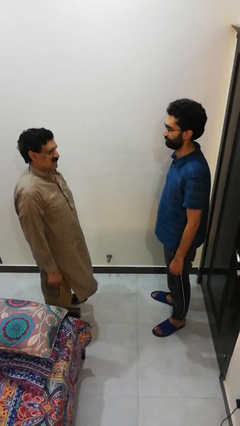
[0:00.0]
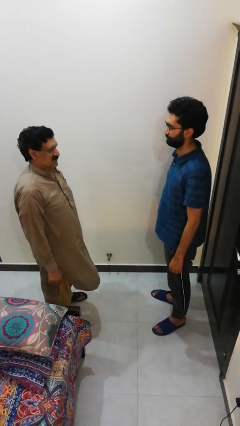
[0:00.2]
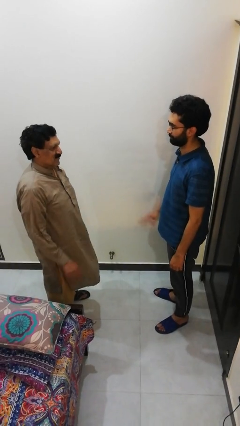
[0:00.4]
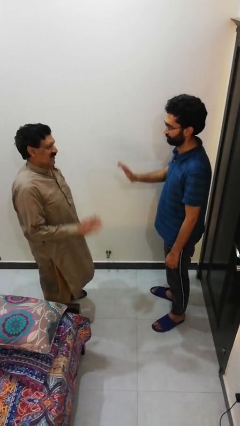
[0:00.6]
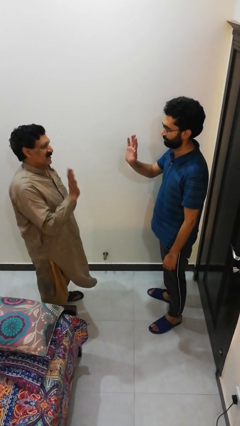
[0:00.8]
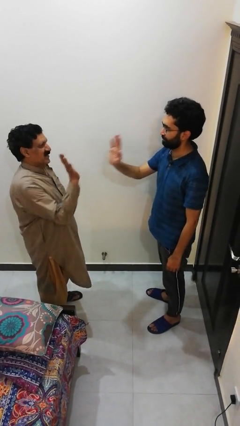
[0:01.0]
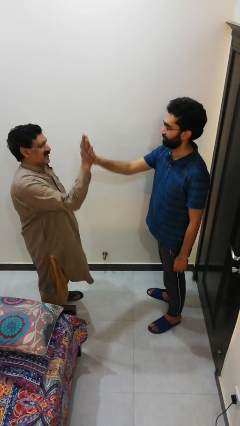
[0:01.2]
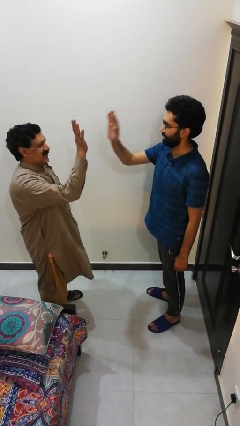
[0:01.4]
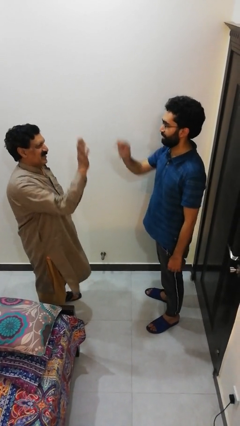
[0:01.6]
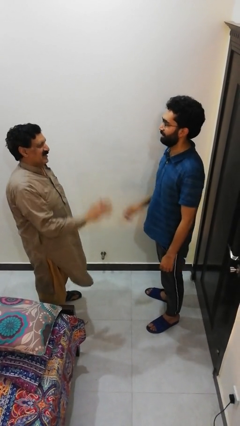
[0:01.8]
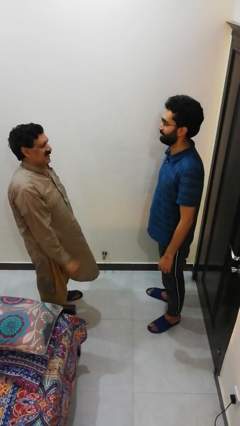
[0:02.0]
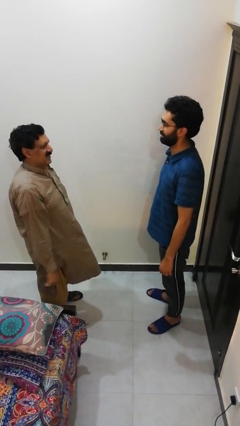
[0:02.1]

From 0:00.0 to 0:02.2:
person highfives hand

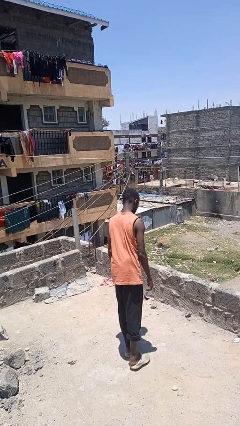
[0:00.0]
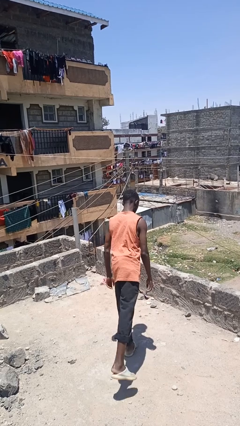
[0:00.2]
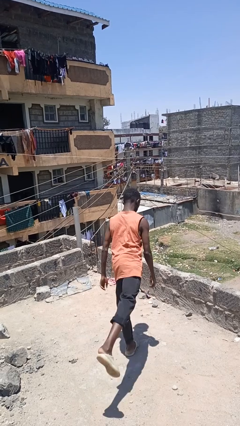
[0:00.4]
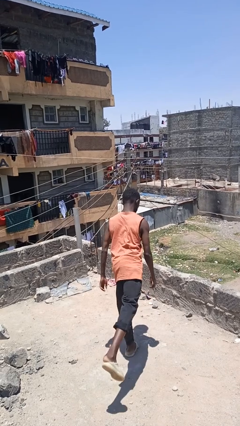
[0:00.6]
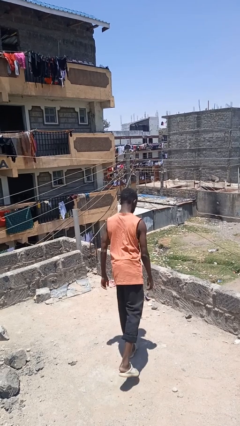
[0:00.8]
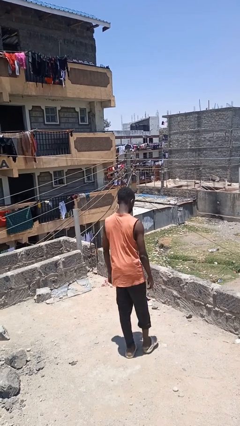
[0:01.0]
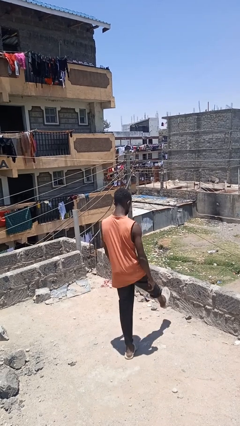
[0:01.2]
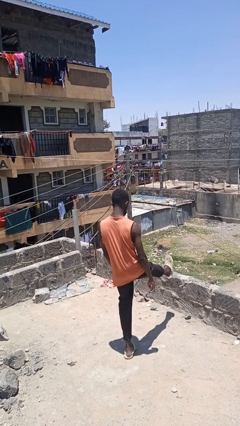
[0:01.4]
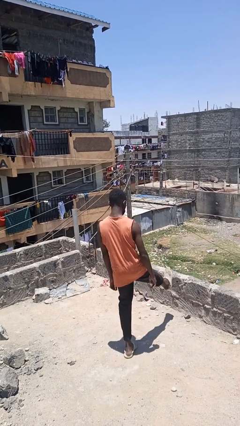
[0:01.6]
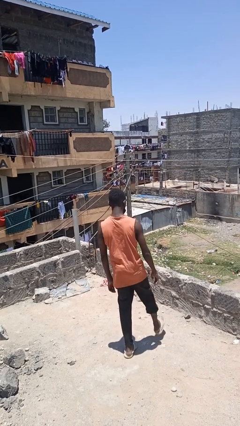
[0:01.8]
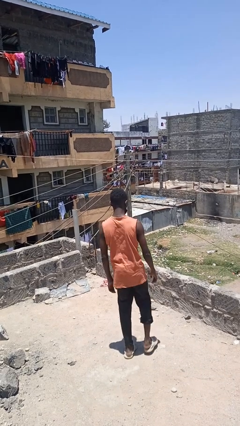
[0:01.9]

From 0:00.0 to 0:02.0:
person wiggles hips

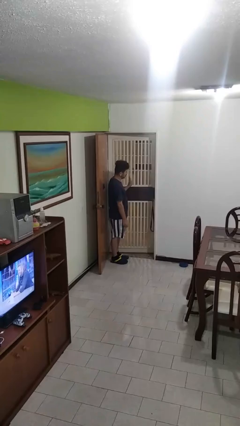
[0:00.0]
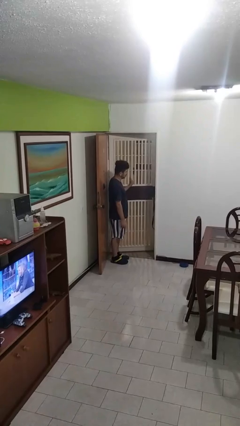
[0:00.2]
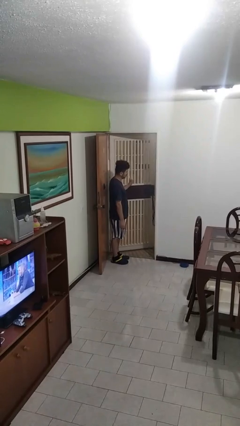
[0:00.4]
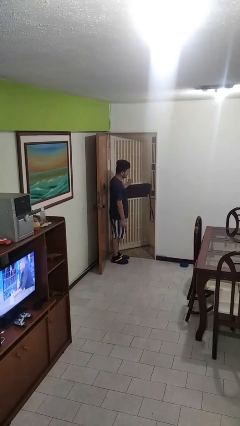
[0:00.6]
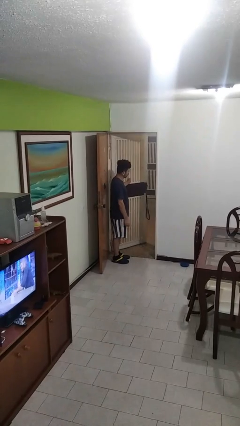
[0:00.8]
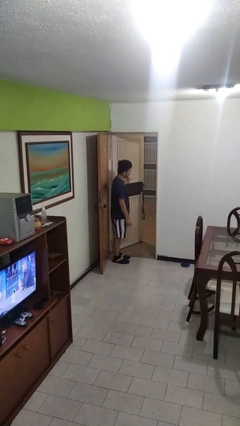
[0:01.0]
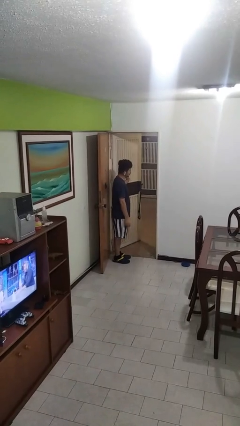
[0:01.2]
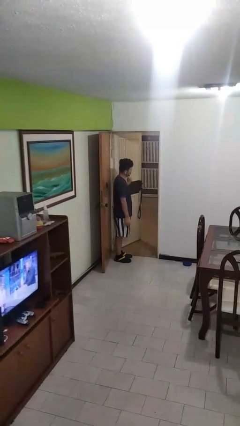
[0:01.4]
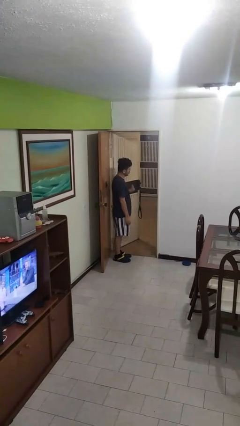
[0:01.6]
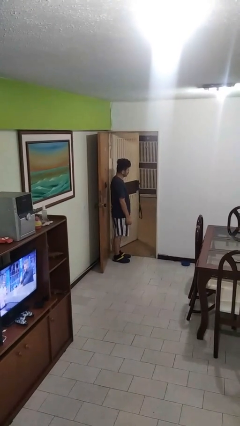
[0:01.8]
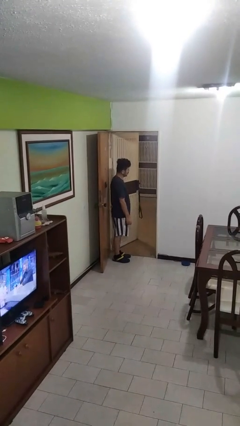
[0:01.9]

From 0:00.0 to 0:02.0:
person opens facility door

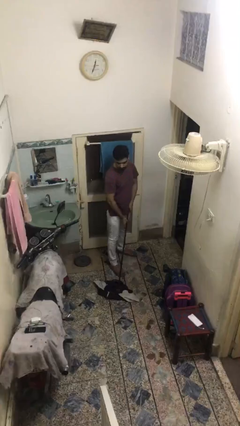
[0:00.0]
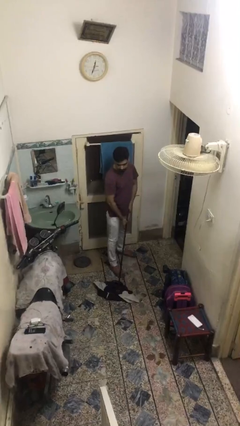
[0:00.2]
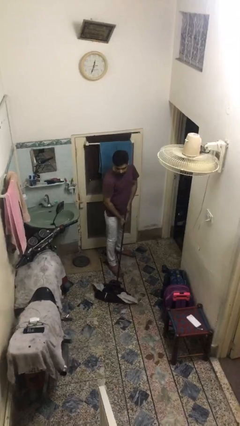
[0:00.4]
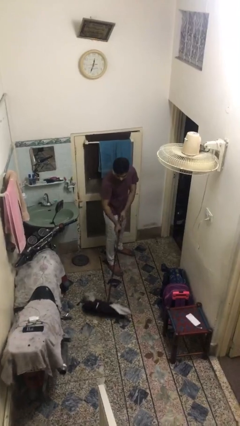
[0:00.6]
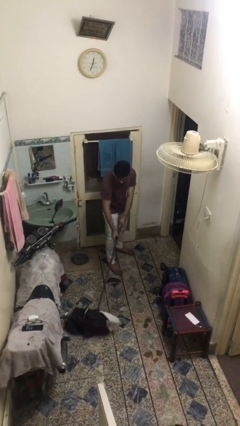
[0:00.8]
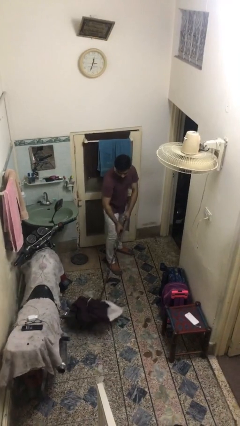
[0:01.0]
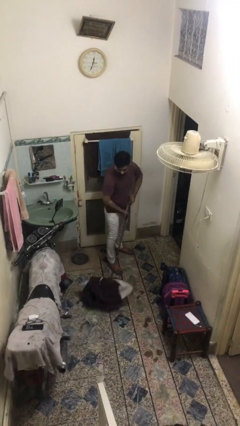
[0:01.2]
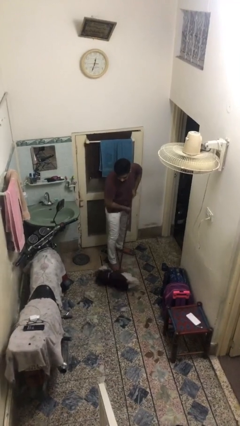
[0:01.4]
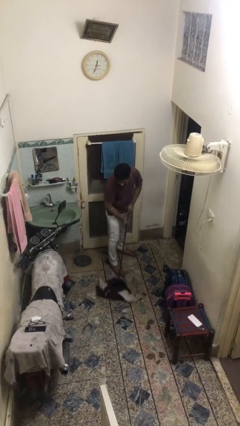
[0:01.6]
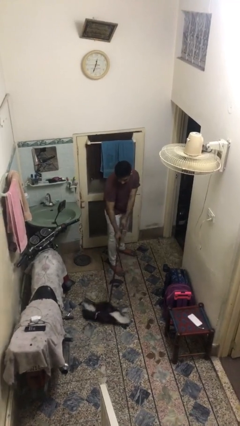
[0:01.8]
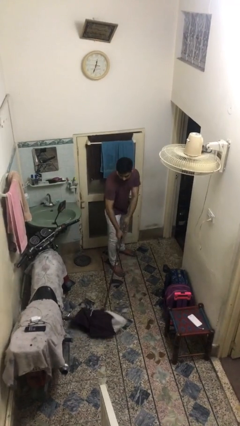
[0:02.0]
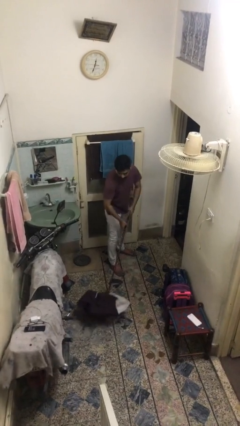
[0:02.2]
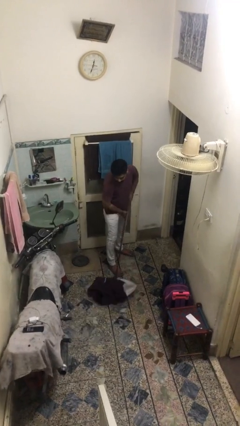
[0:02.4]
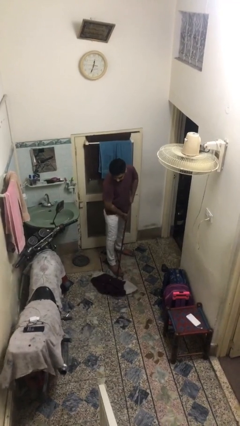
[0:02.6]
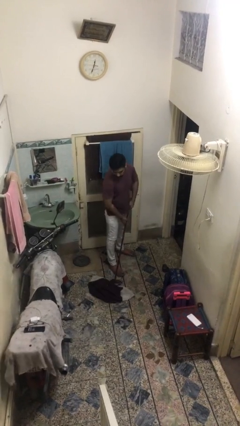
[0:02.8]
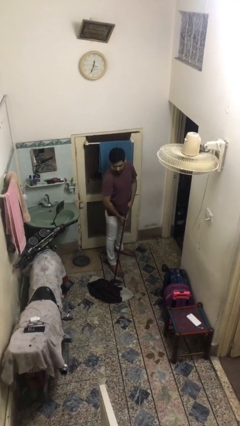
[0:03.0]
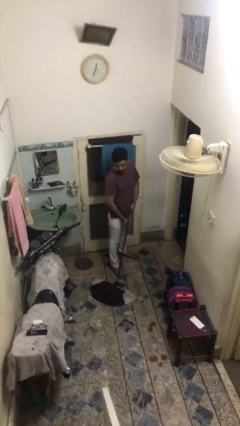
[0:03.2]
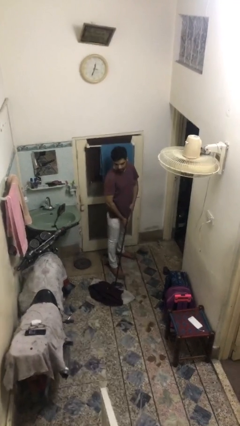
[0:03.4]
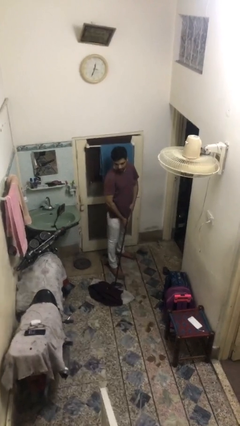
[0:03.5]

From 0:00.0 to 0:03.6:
person sweeps floor

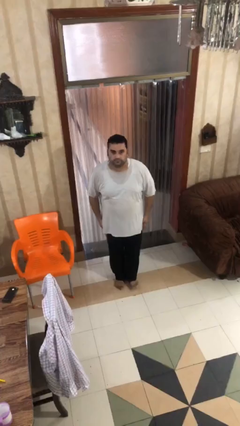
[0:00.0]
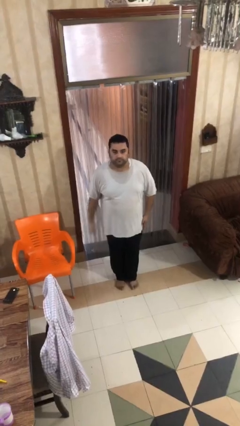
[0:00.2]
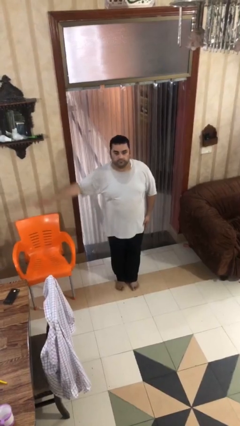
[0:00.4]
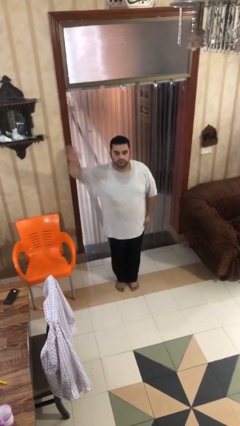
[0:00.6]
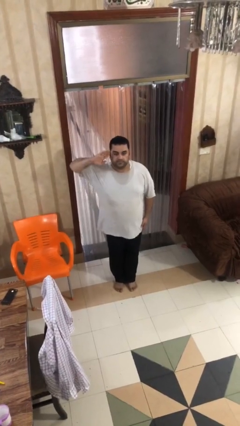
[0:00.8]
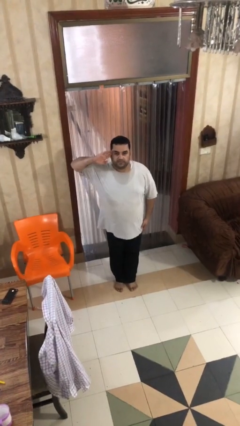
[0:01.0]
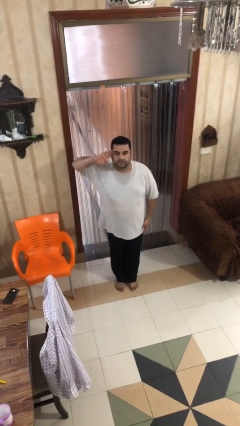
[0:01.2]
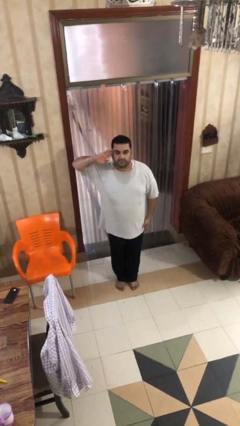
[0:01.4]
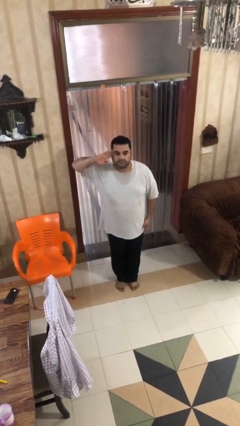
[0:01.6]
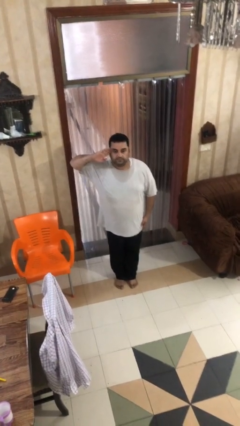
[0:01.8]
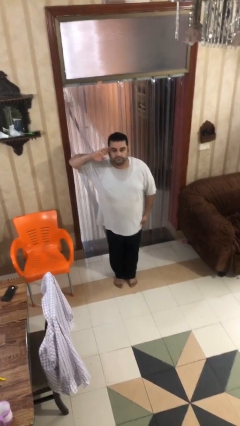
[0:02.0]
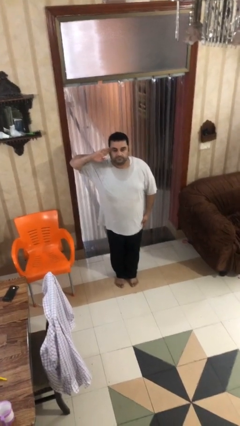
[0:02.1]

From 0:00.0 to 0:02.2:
person salutes

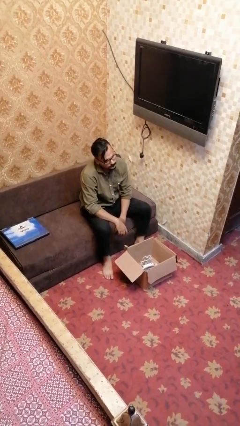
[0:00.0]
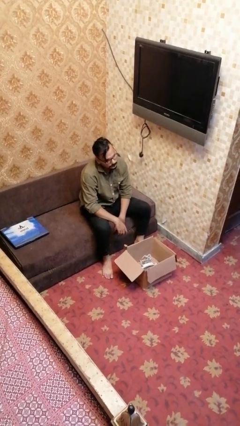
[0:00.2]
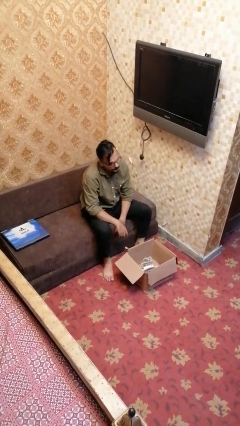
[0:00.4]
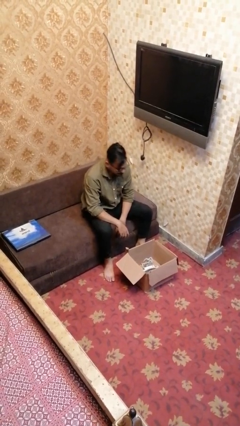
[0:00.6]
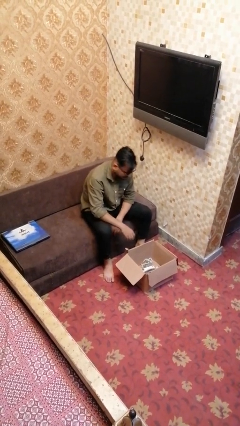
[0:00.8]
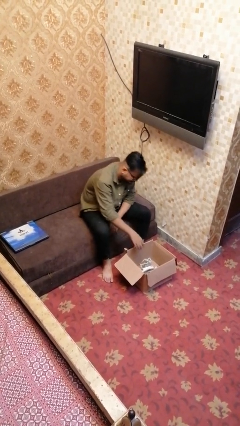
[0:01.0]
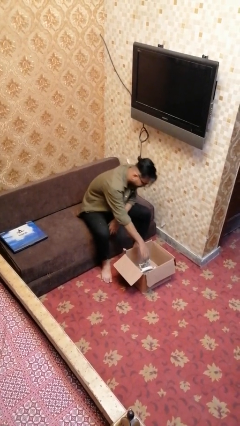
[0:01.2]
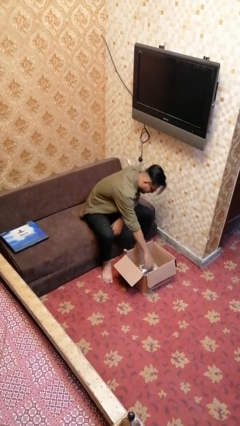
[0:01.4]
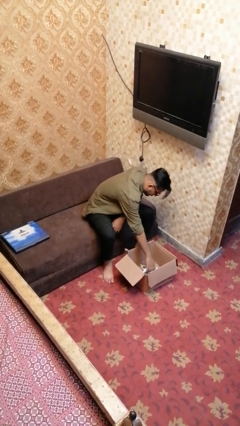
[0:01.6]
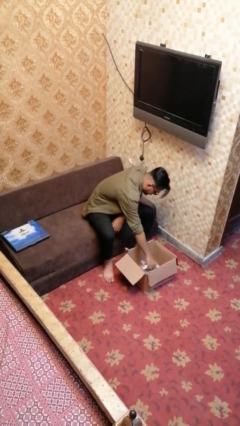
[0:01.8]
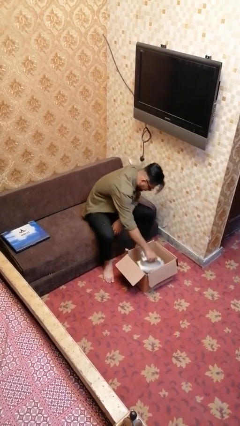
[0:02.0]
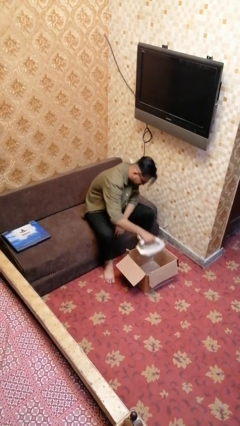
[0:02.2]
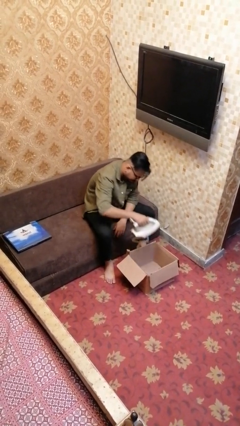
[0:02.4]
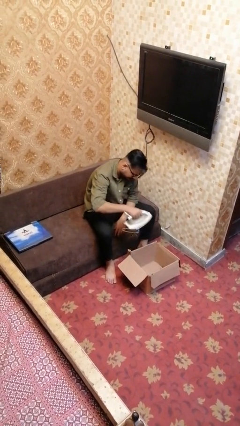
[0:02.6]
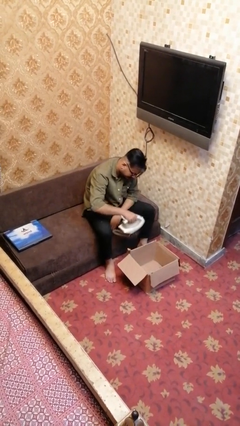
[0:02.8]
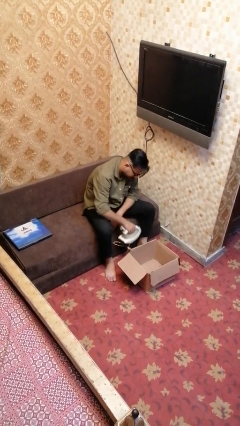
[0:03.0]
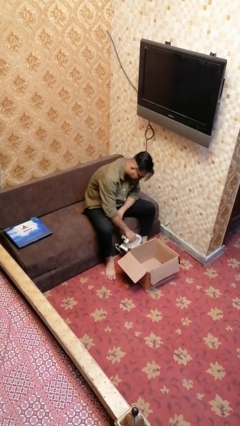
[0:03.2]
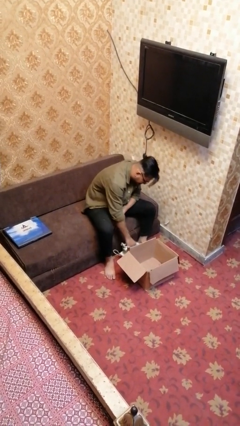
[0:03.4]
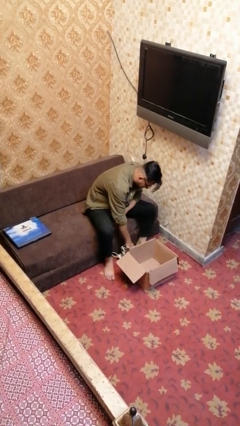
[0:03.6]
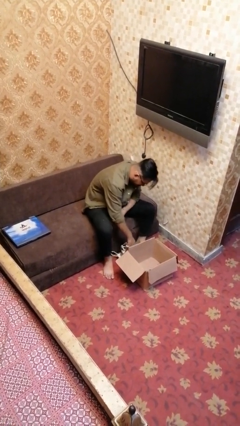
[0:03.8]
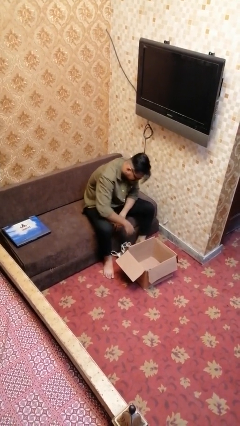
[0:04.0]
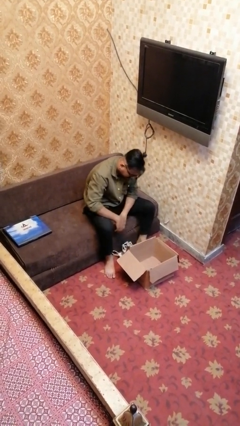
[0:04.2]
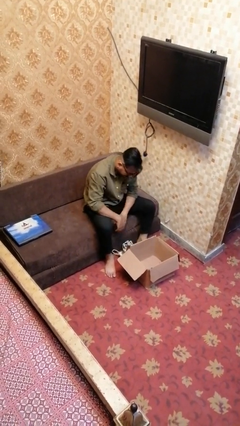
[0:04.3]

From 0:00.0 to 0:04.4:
person takes object from box

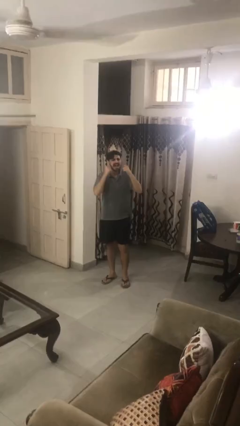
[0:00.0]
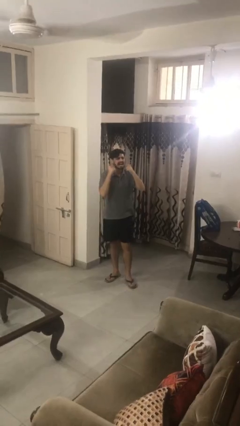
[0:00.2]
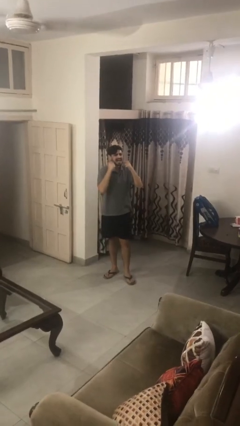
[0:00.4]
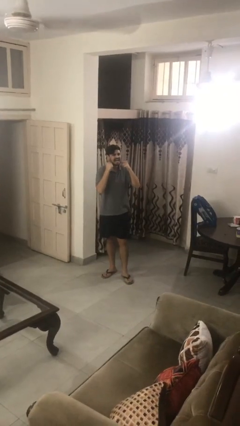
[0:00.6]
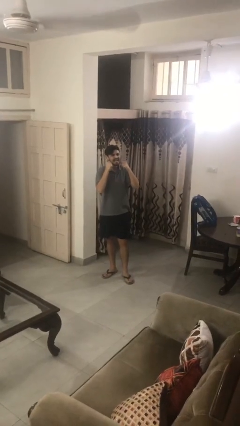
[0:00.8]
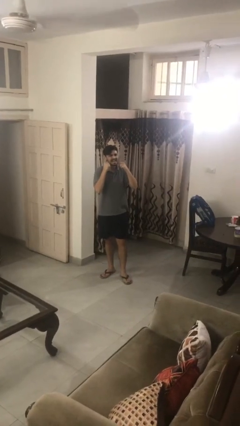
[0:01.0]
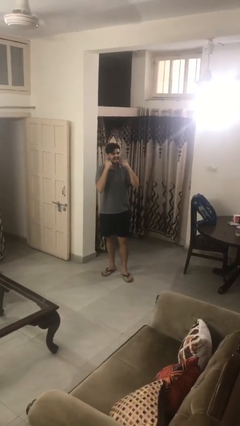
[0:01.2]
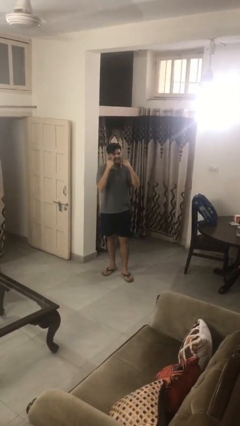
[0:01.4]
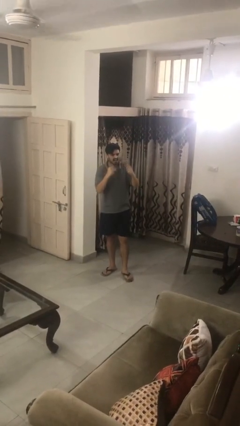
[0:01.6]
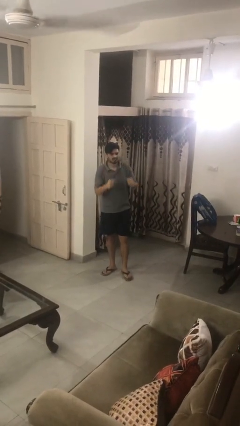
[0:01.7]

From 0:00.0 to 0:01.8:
person flosses
